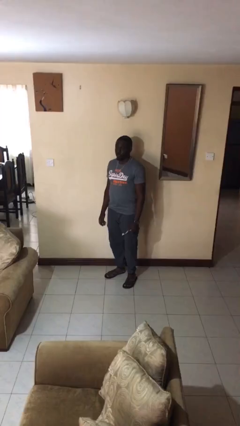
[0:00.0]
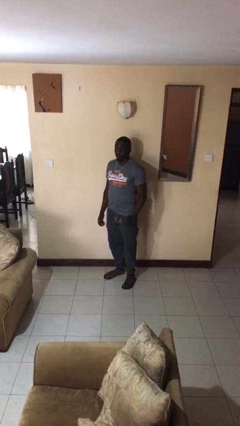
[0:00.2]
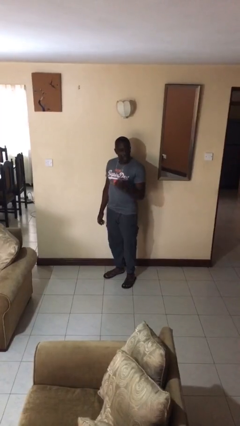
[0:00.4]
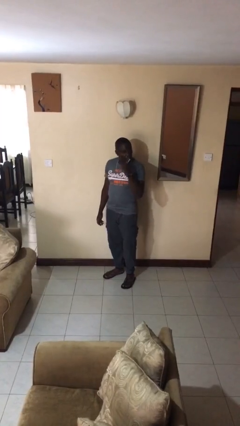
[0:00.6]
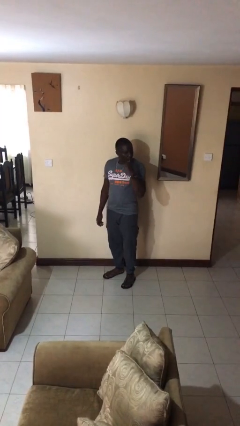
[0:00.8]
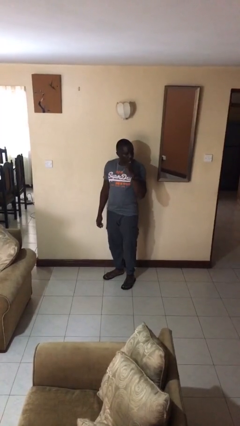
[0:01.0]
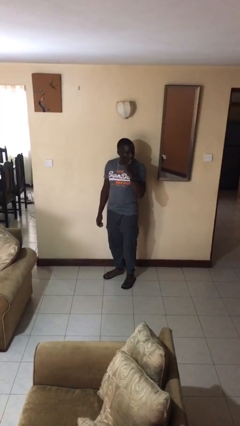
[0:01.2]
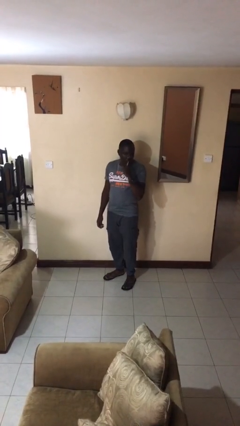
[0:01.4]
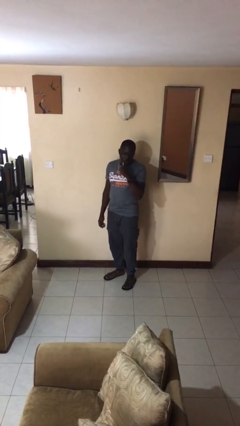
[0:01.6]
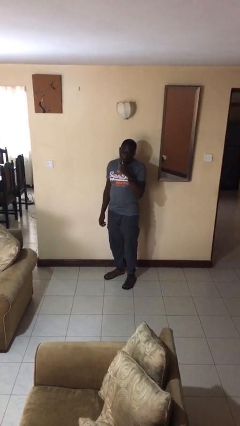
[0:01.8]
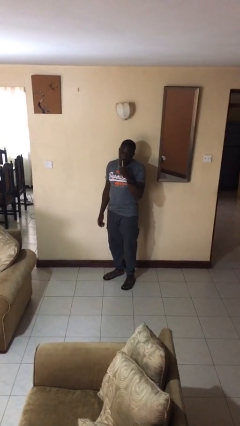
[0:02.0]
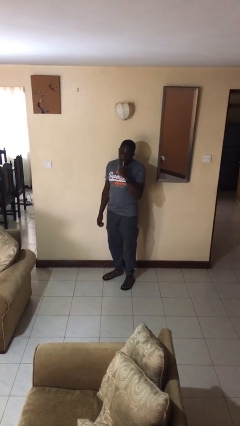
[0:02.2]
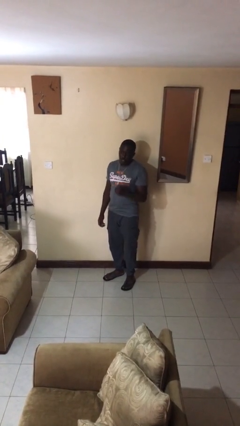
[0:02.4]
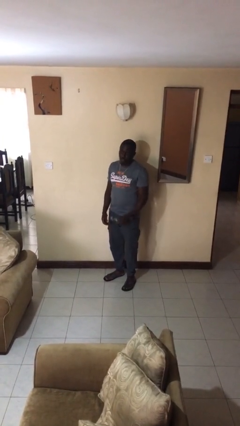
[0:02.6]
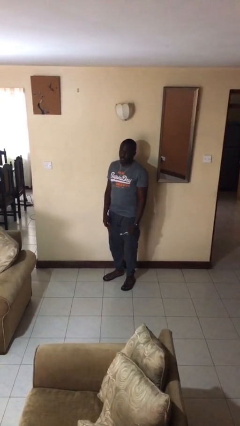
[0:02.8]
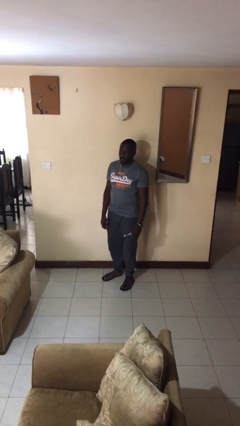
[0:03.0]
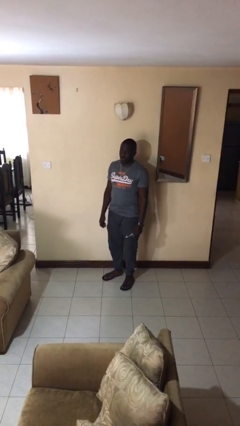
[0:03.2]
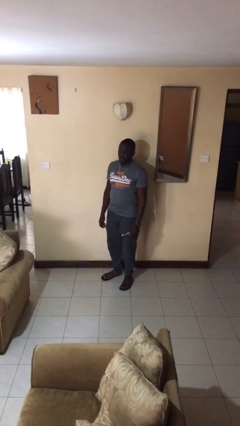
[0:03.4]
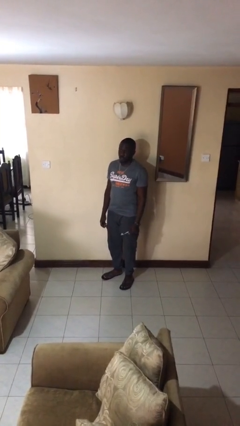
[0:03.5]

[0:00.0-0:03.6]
person brushes teeth

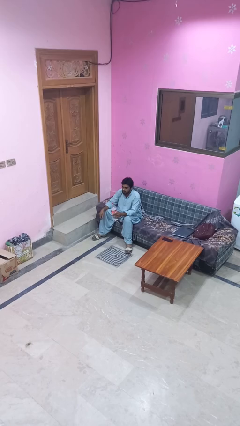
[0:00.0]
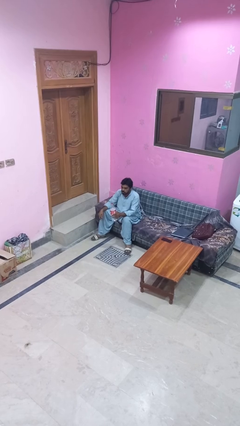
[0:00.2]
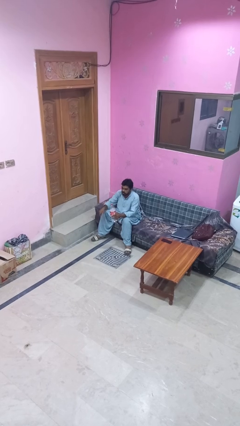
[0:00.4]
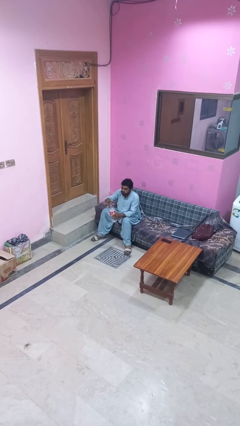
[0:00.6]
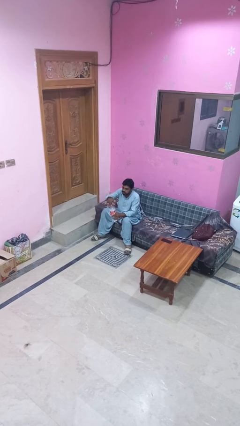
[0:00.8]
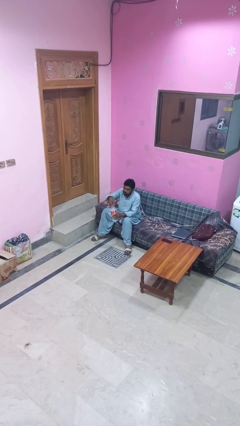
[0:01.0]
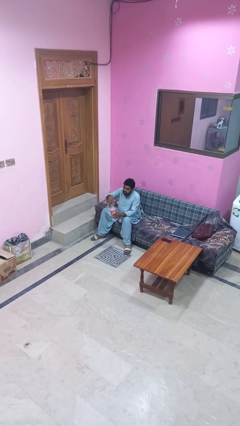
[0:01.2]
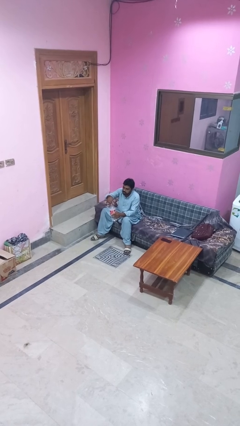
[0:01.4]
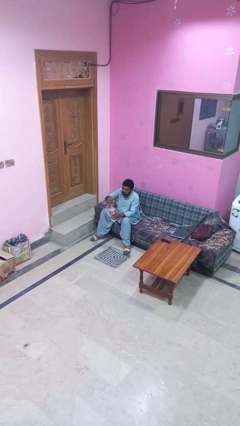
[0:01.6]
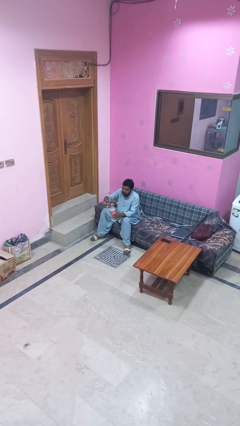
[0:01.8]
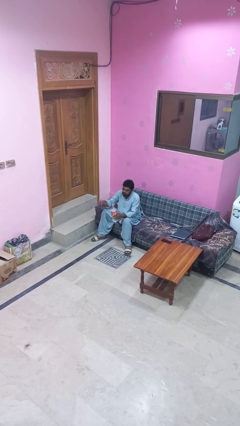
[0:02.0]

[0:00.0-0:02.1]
person unscrews lid from bottle

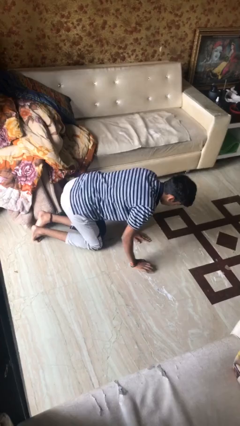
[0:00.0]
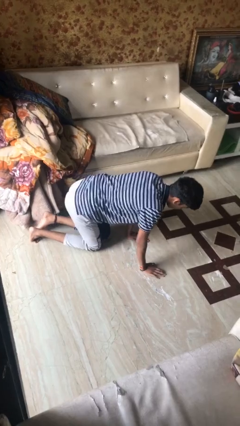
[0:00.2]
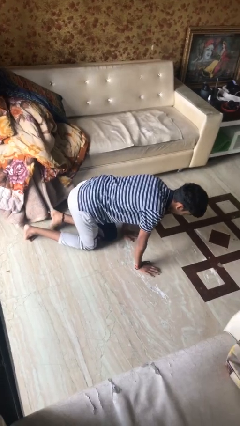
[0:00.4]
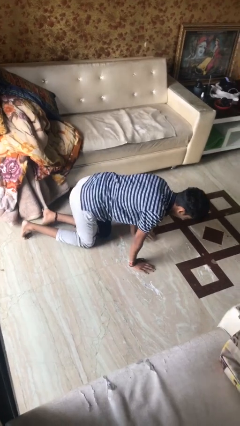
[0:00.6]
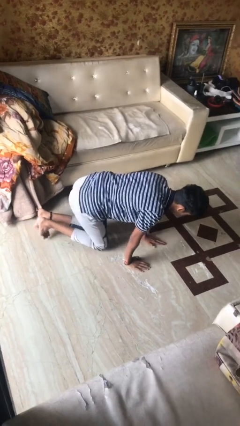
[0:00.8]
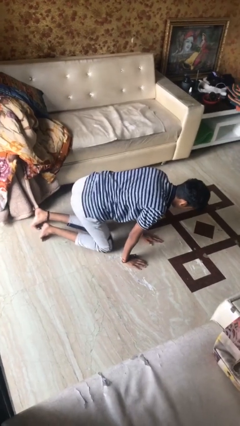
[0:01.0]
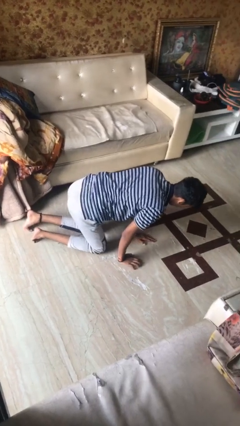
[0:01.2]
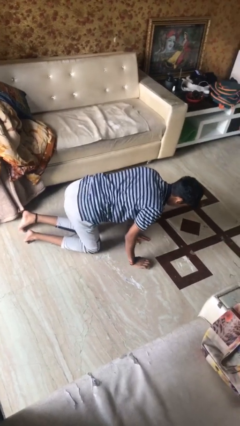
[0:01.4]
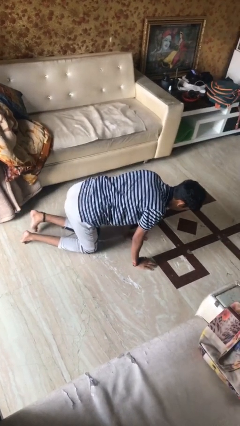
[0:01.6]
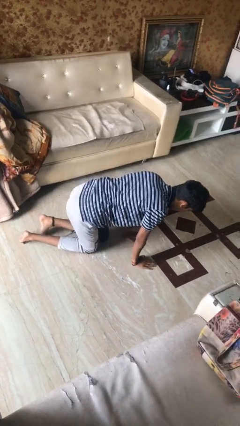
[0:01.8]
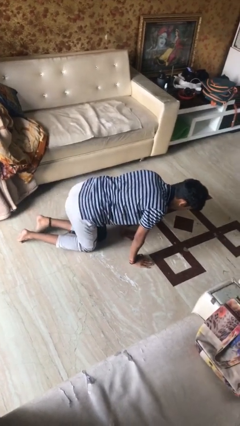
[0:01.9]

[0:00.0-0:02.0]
person crawls

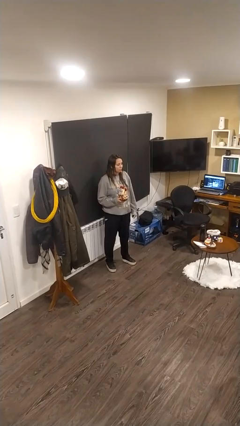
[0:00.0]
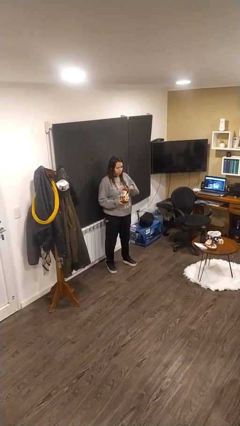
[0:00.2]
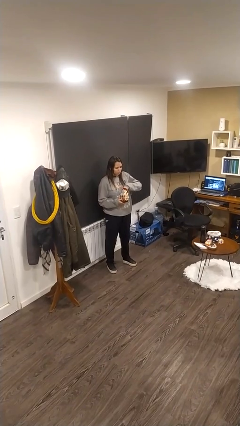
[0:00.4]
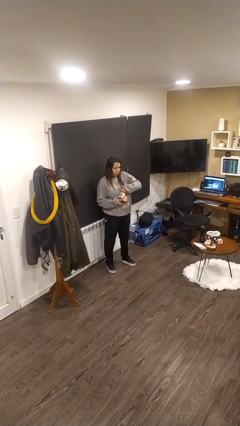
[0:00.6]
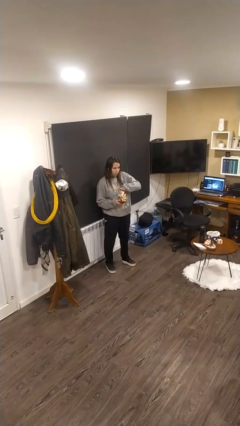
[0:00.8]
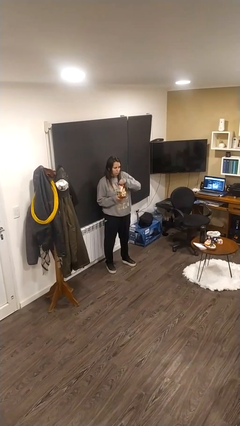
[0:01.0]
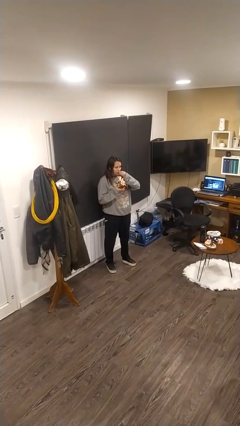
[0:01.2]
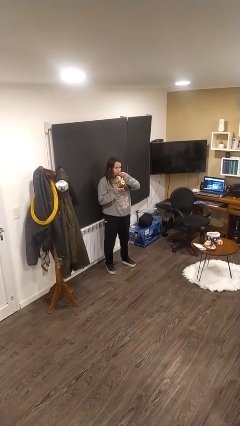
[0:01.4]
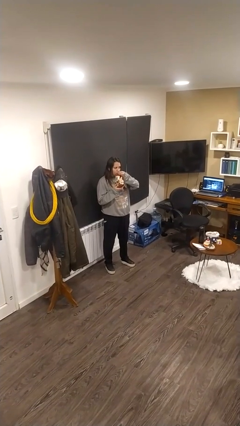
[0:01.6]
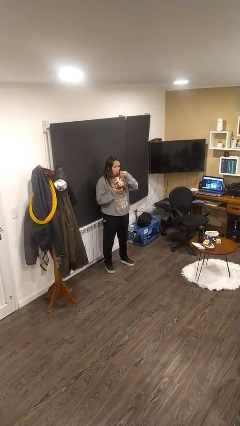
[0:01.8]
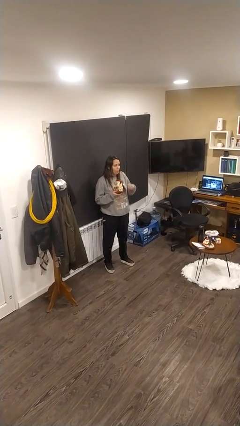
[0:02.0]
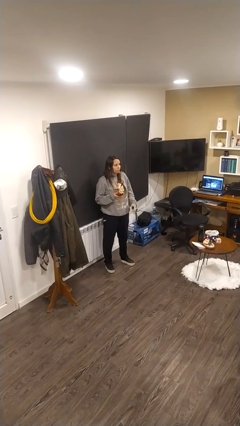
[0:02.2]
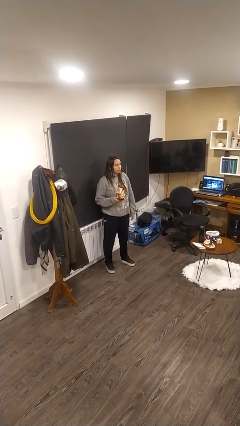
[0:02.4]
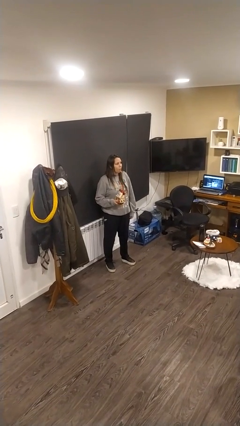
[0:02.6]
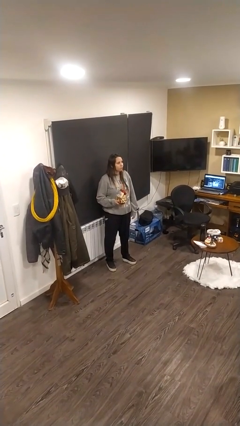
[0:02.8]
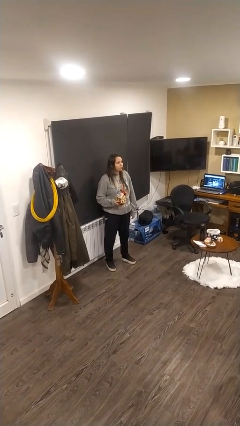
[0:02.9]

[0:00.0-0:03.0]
person eats snack from bag

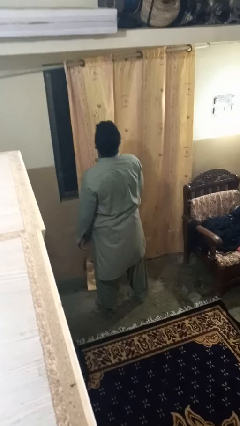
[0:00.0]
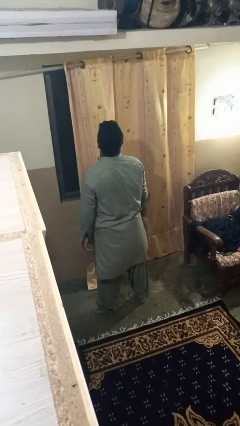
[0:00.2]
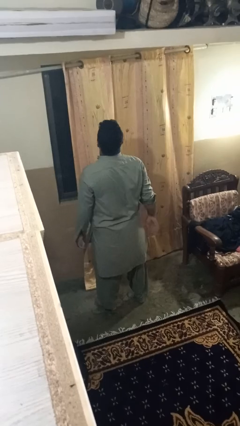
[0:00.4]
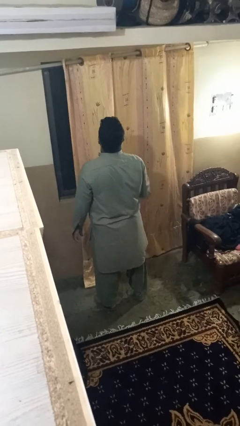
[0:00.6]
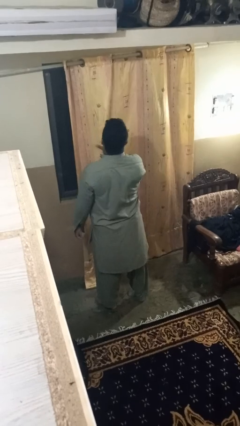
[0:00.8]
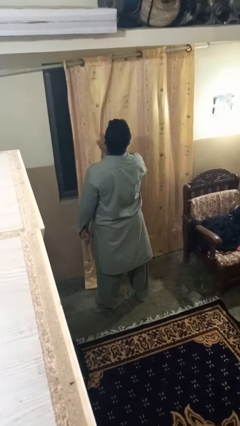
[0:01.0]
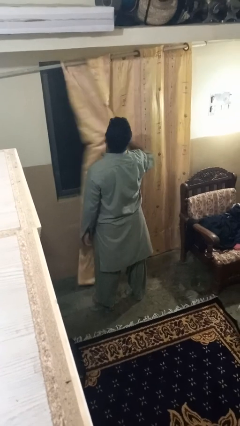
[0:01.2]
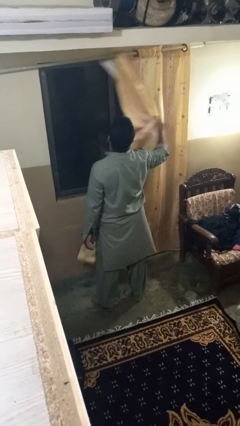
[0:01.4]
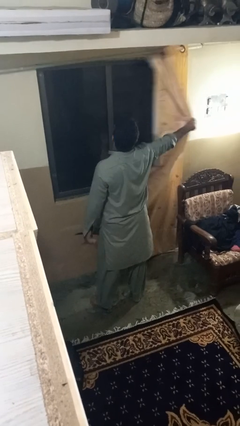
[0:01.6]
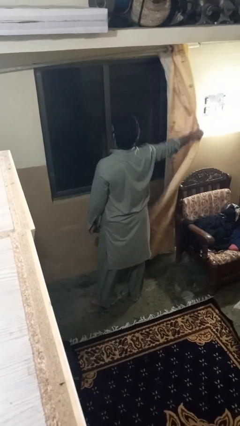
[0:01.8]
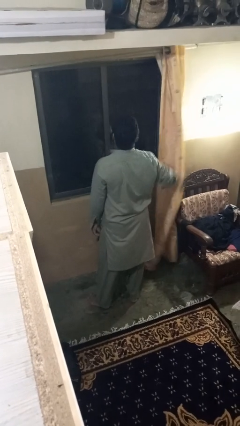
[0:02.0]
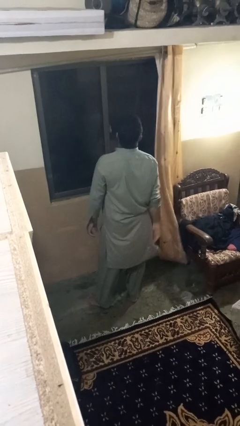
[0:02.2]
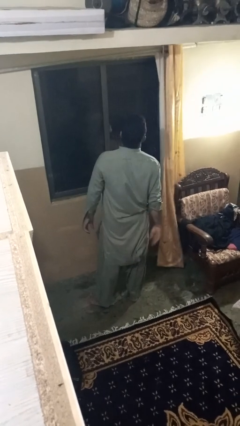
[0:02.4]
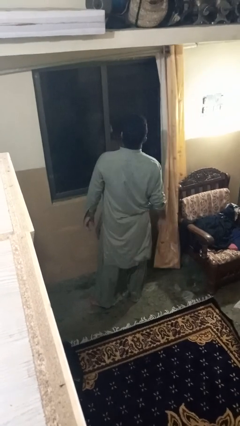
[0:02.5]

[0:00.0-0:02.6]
person opens curtains

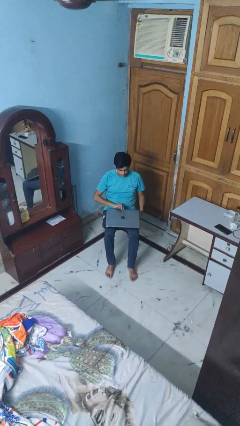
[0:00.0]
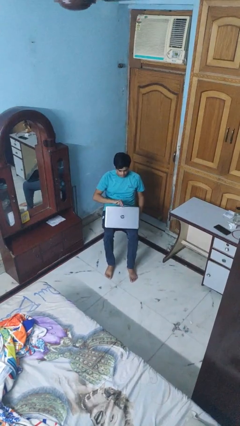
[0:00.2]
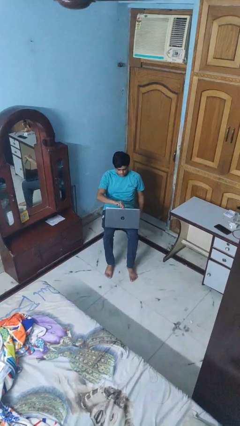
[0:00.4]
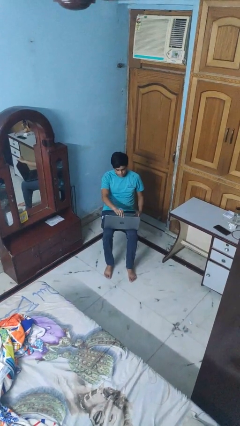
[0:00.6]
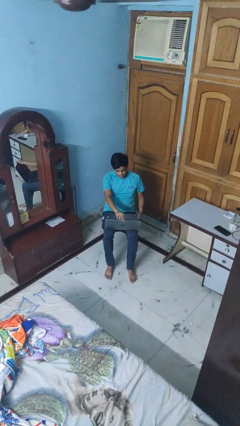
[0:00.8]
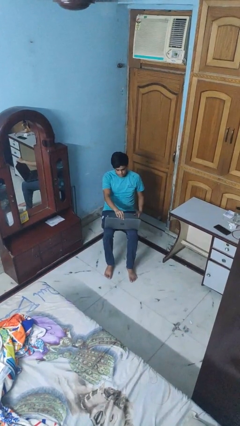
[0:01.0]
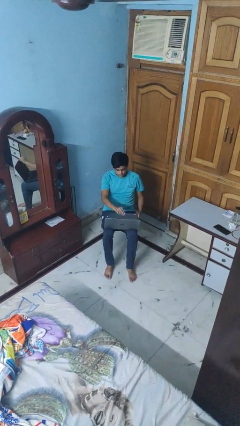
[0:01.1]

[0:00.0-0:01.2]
person opens laptop

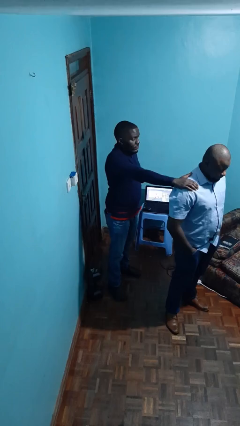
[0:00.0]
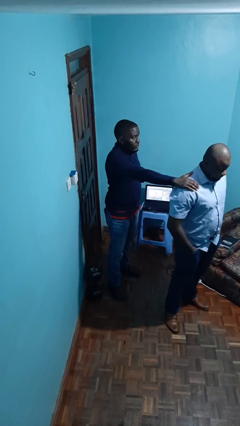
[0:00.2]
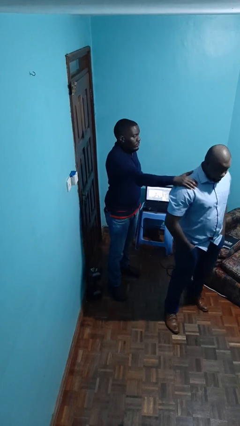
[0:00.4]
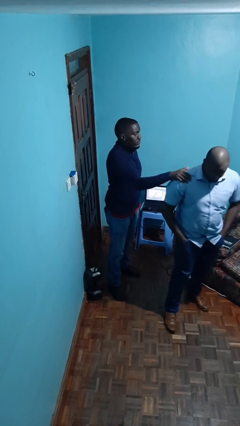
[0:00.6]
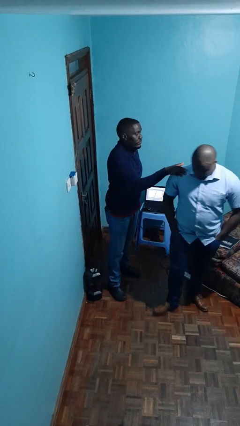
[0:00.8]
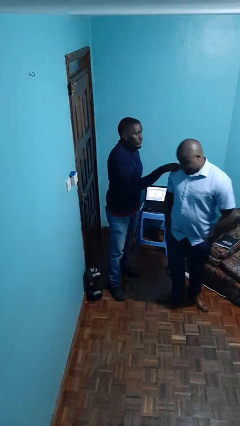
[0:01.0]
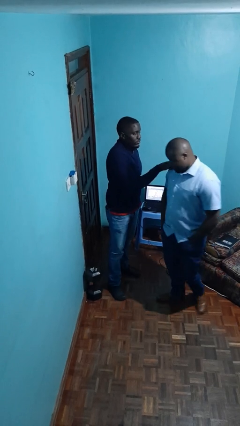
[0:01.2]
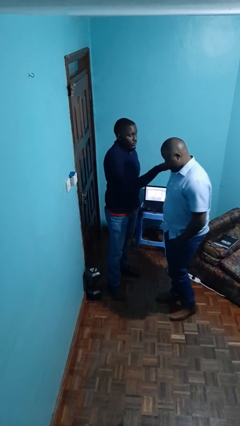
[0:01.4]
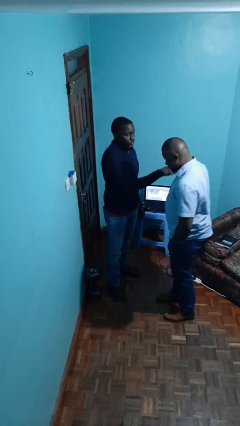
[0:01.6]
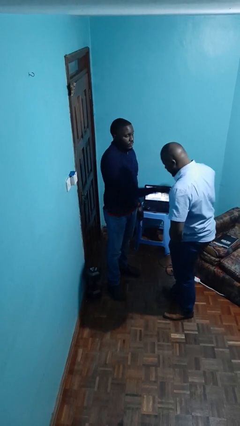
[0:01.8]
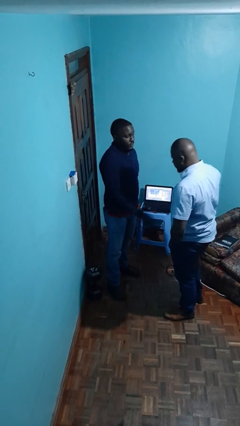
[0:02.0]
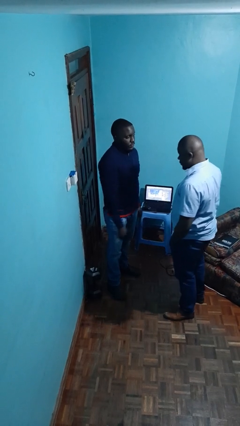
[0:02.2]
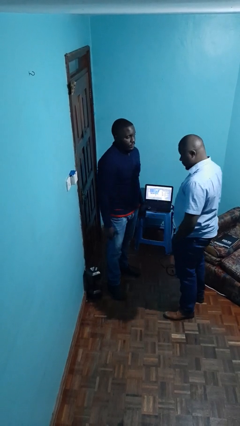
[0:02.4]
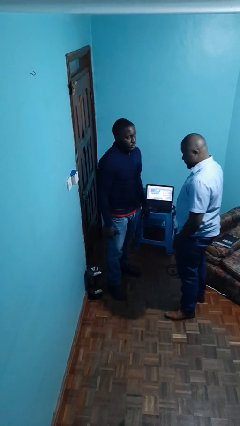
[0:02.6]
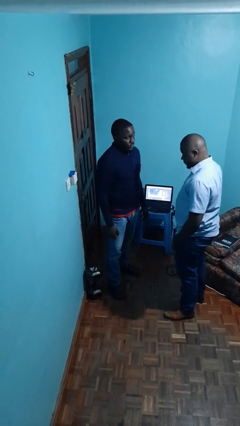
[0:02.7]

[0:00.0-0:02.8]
person spins person around
